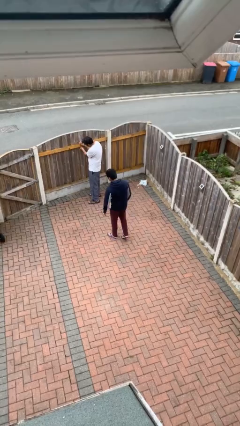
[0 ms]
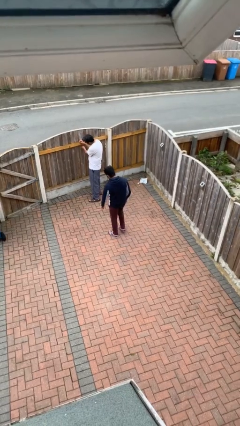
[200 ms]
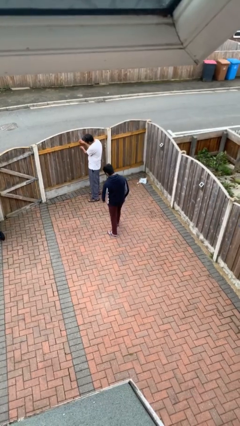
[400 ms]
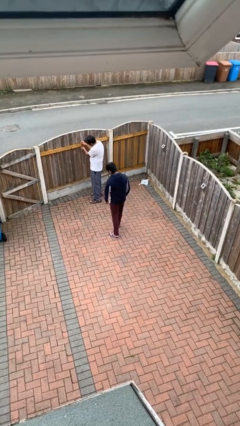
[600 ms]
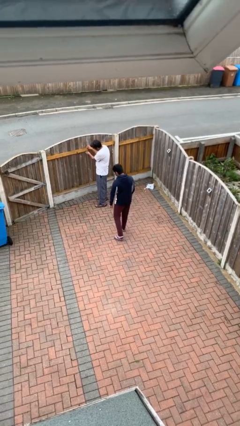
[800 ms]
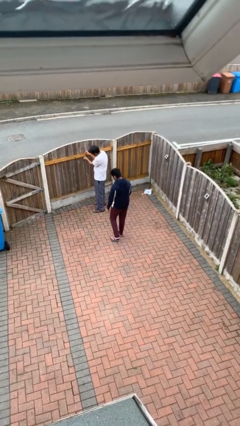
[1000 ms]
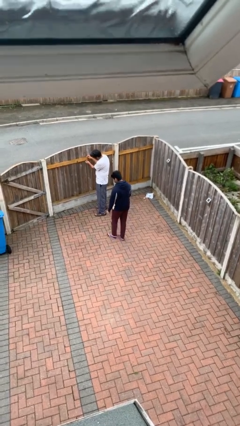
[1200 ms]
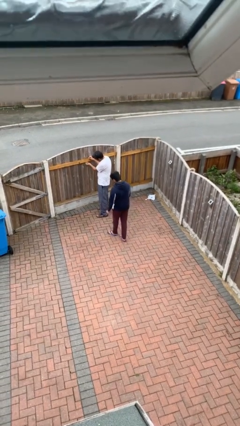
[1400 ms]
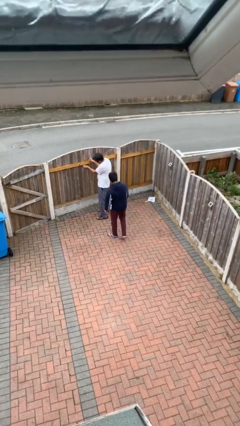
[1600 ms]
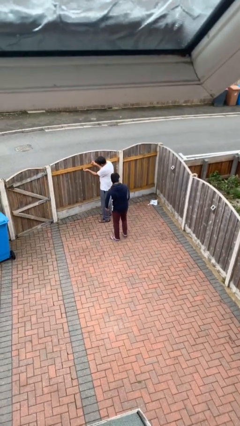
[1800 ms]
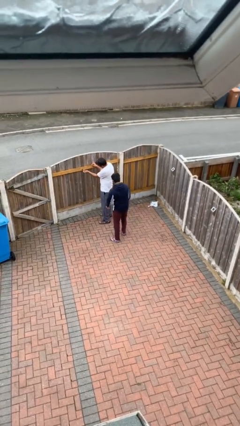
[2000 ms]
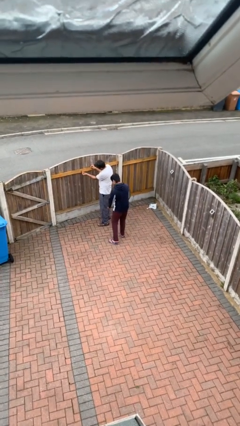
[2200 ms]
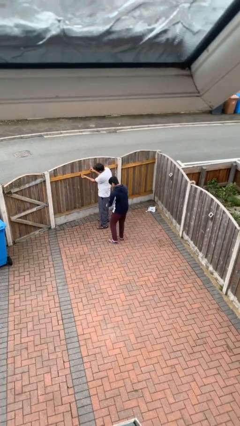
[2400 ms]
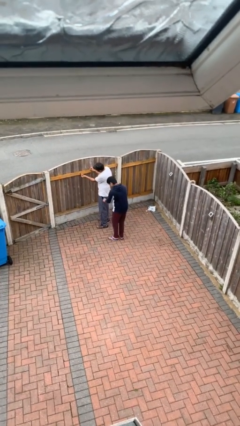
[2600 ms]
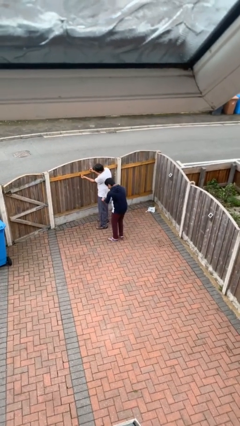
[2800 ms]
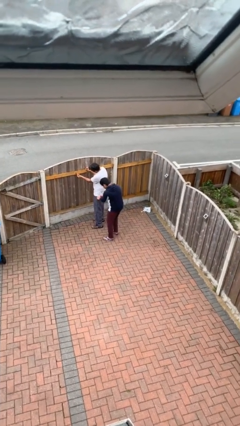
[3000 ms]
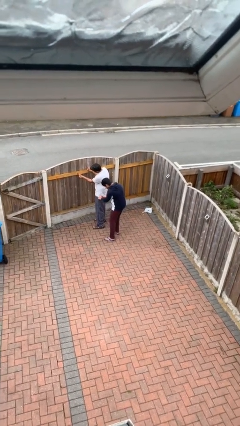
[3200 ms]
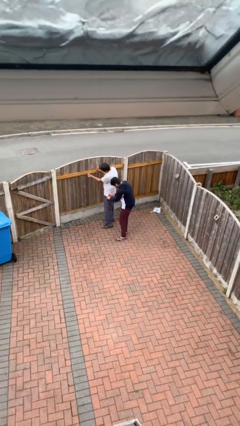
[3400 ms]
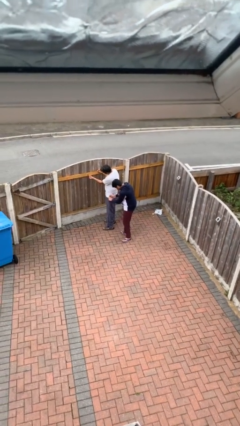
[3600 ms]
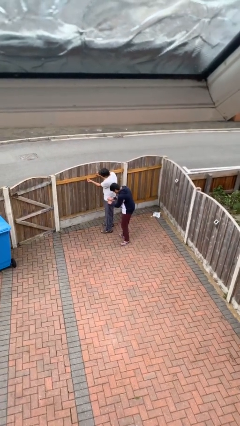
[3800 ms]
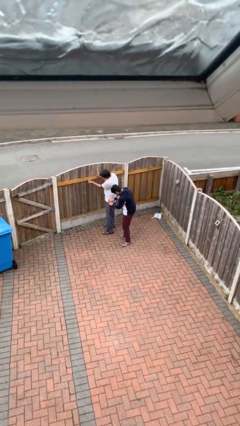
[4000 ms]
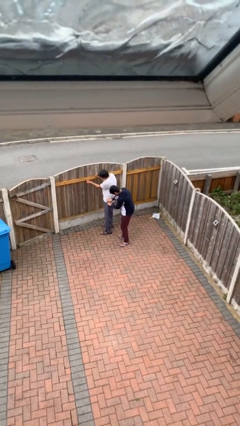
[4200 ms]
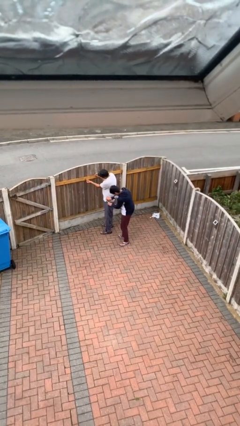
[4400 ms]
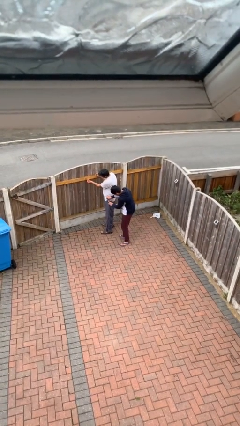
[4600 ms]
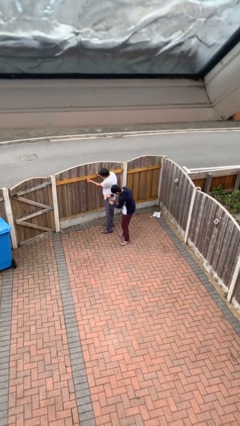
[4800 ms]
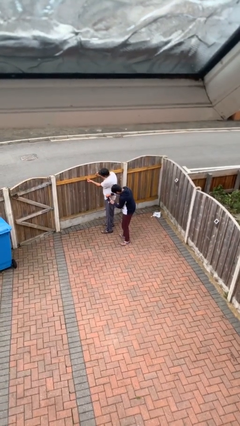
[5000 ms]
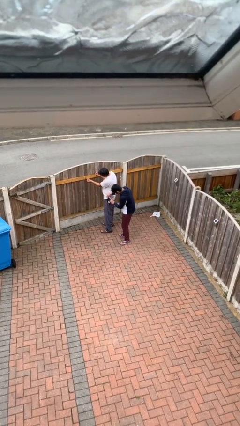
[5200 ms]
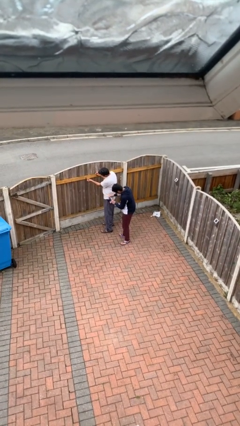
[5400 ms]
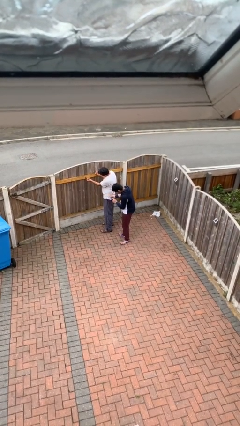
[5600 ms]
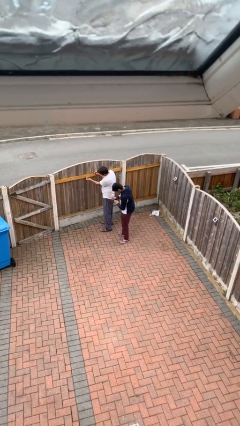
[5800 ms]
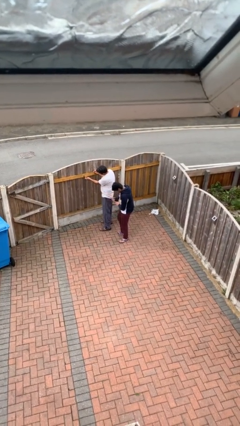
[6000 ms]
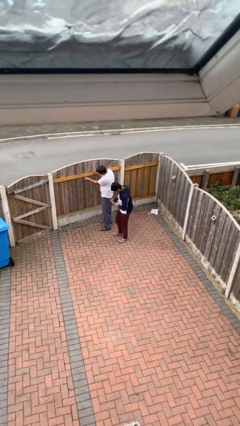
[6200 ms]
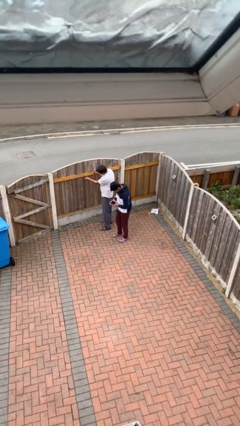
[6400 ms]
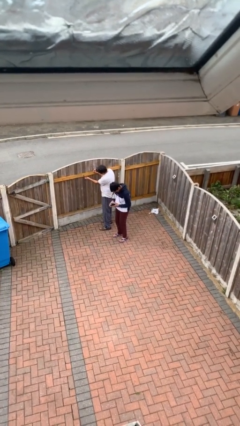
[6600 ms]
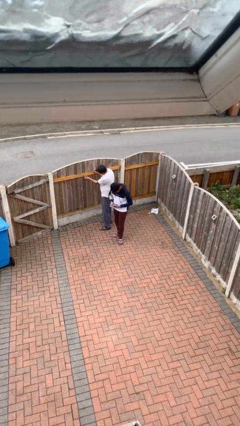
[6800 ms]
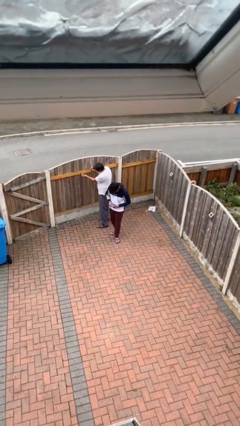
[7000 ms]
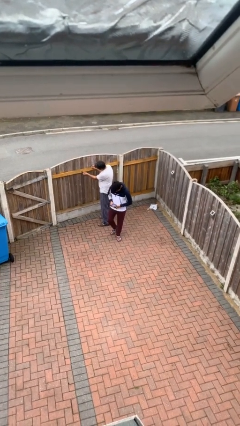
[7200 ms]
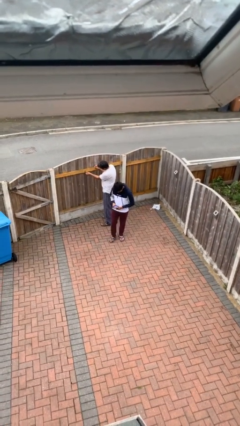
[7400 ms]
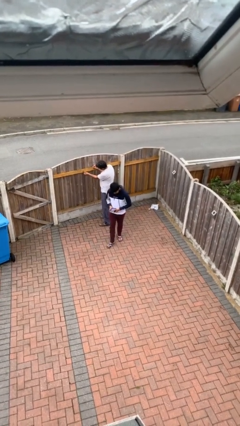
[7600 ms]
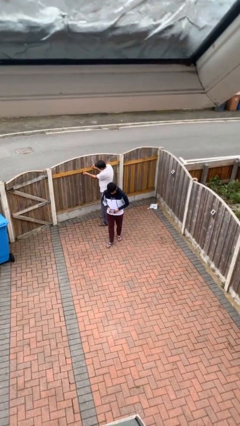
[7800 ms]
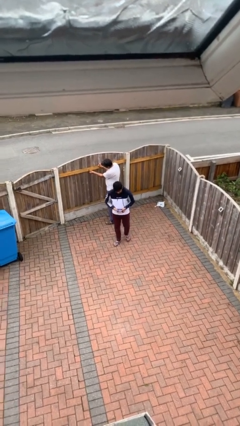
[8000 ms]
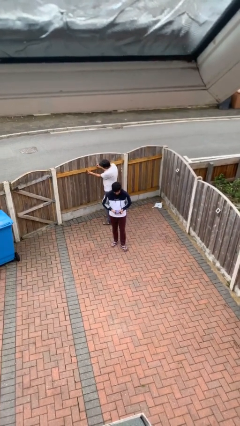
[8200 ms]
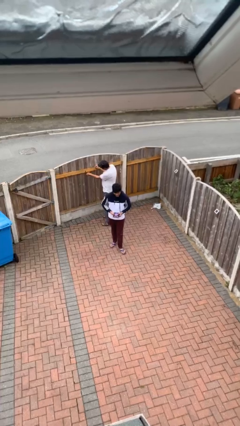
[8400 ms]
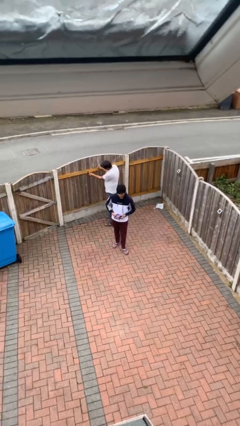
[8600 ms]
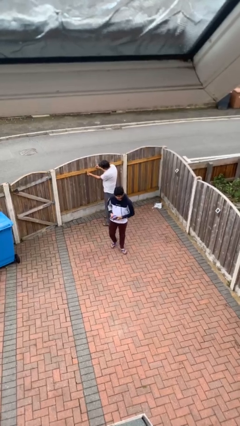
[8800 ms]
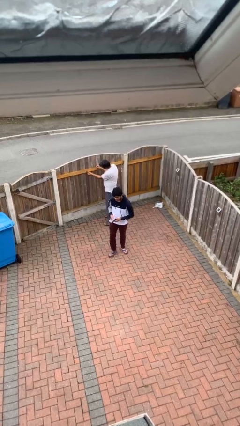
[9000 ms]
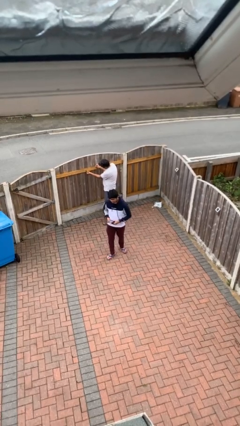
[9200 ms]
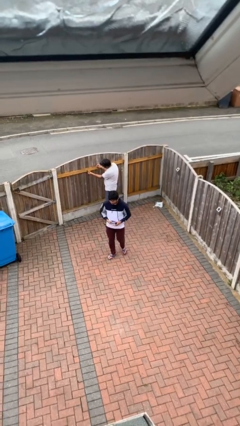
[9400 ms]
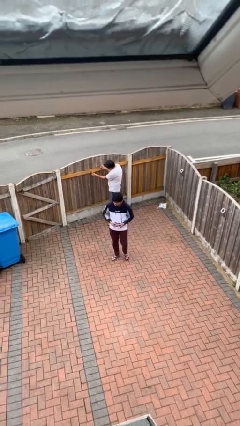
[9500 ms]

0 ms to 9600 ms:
person steals object from person

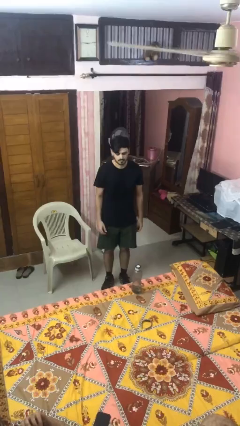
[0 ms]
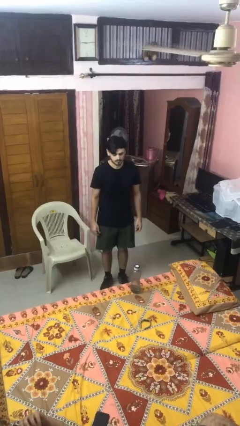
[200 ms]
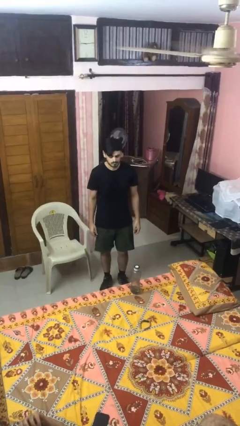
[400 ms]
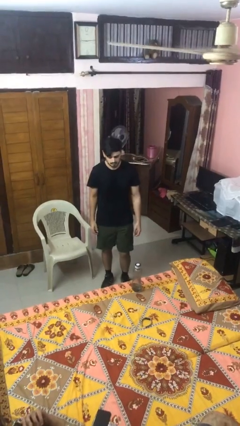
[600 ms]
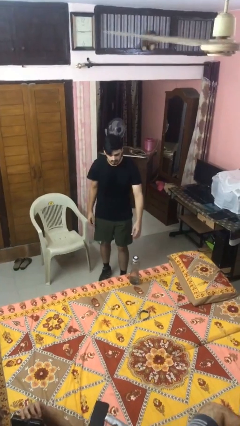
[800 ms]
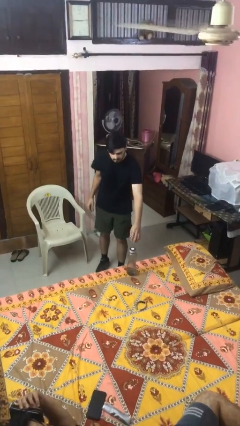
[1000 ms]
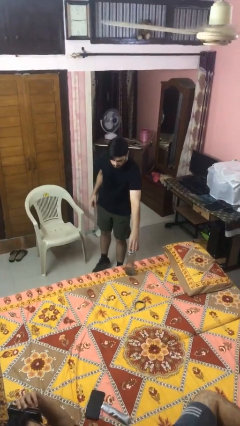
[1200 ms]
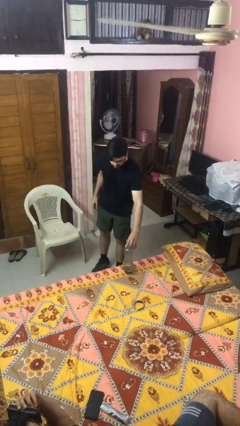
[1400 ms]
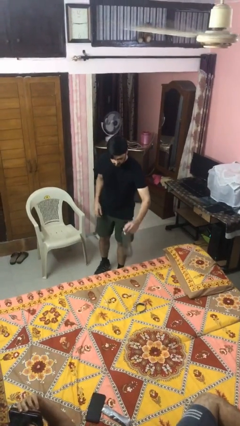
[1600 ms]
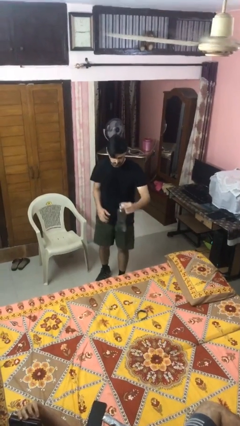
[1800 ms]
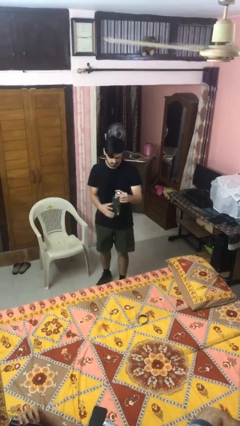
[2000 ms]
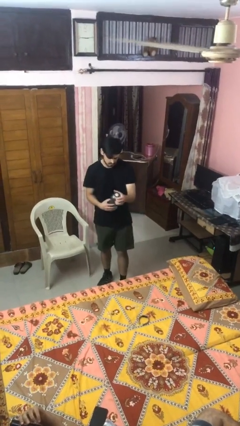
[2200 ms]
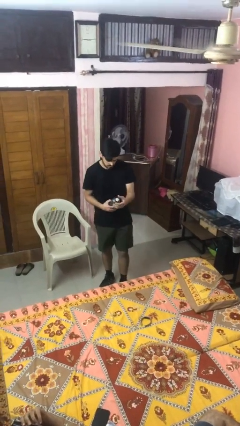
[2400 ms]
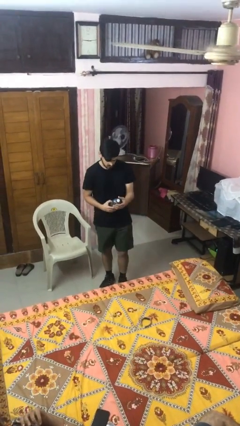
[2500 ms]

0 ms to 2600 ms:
person picks up object from bed

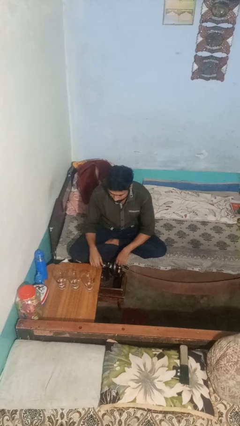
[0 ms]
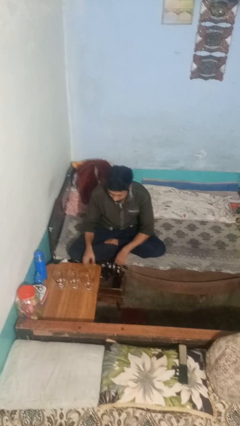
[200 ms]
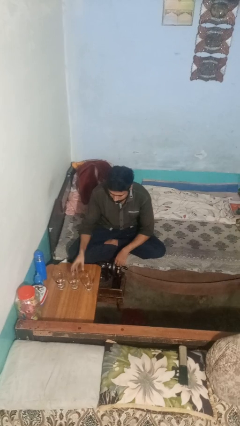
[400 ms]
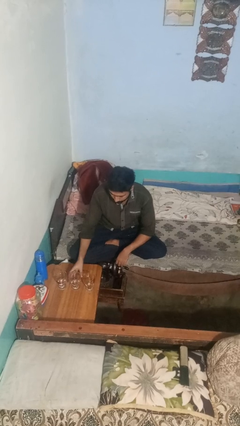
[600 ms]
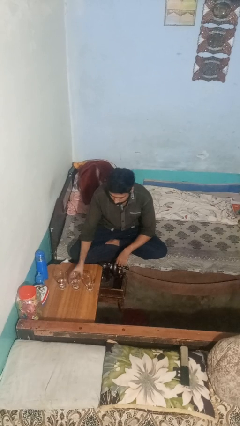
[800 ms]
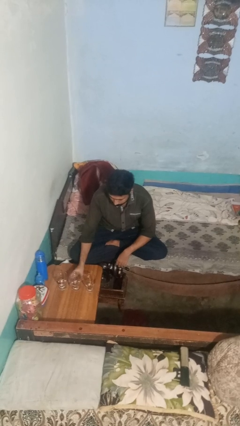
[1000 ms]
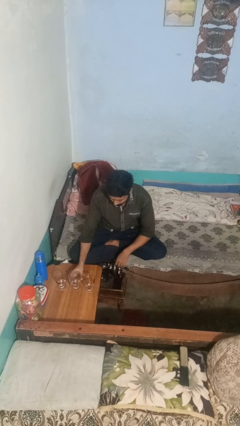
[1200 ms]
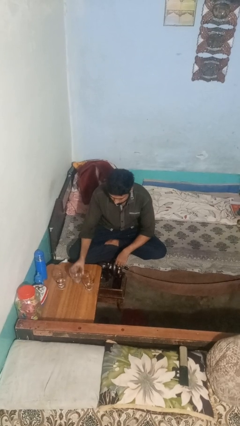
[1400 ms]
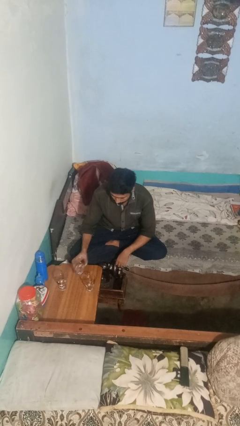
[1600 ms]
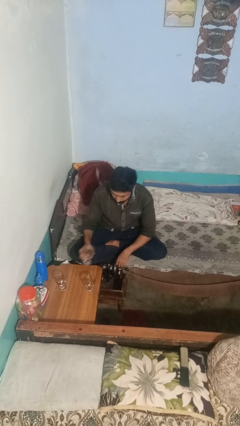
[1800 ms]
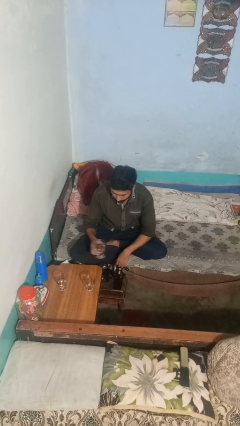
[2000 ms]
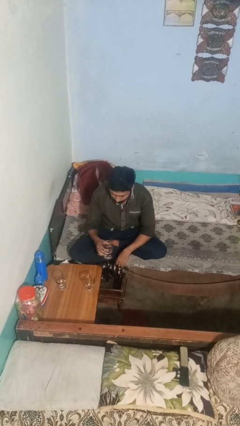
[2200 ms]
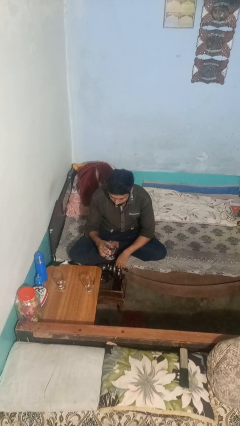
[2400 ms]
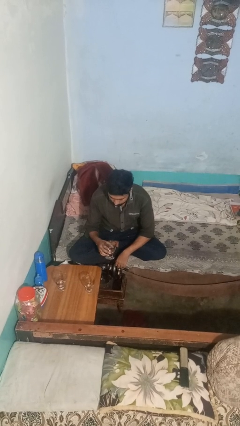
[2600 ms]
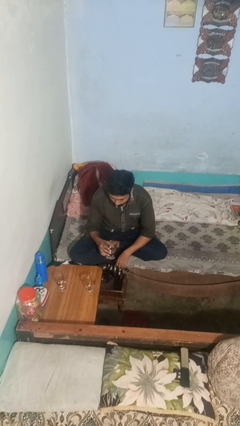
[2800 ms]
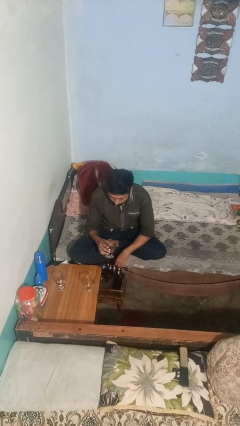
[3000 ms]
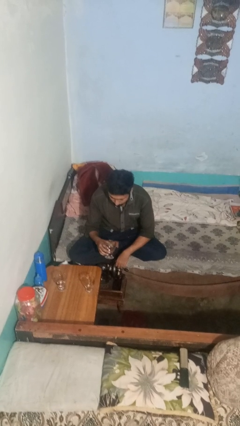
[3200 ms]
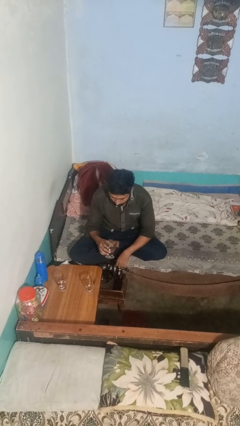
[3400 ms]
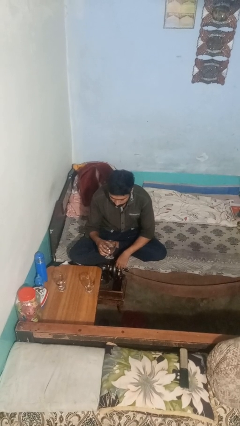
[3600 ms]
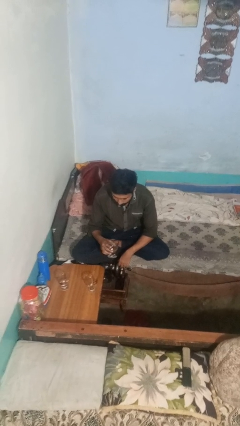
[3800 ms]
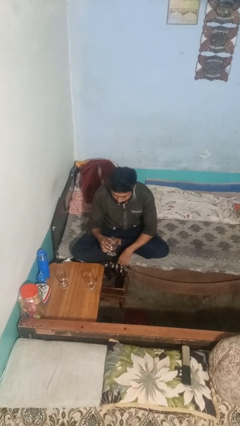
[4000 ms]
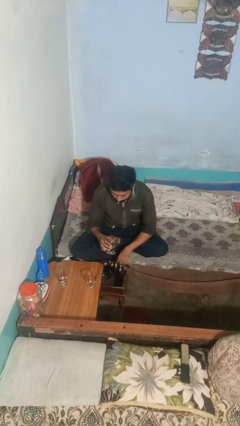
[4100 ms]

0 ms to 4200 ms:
person picks up object from table

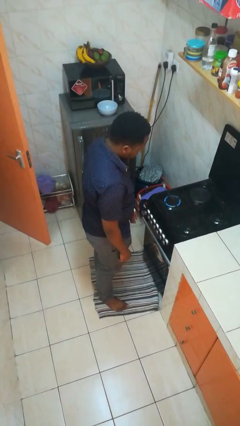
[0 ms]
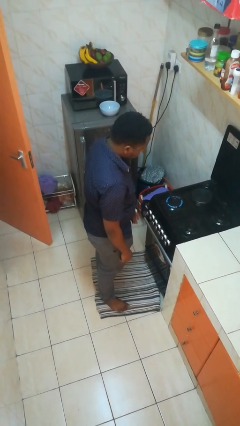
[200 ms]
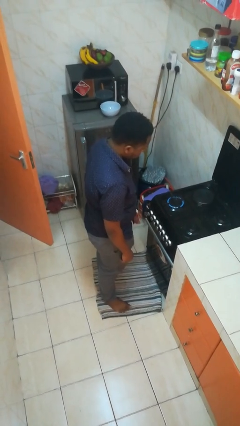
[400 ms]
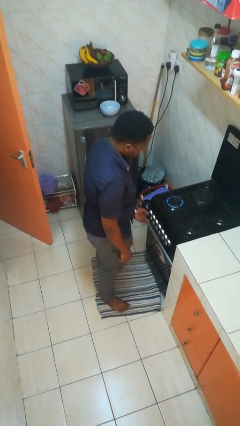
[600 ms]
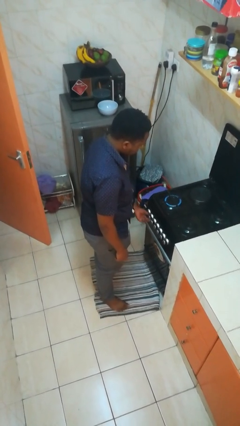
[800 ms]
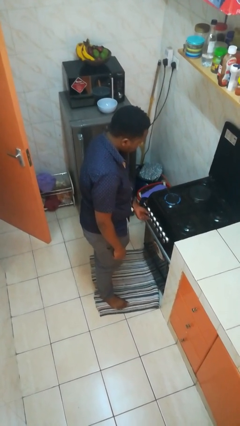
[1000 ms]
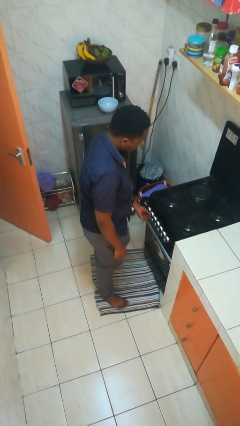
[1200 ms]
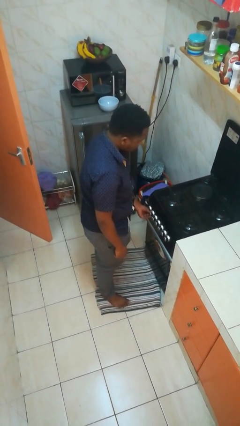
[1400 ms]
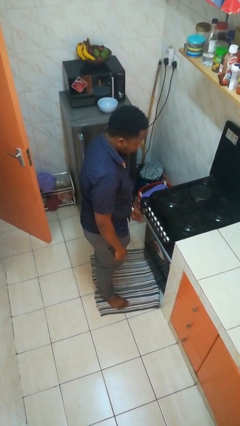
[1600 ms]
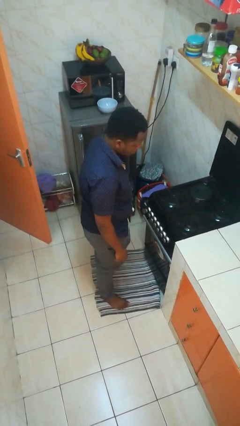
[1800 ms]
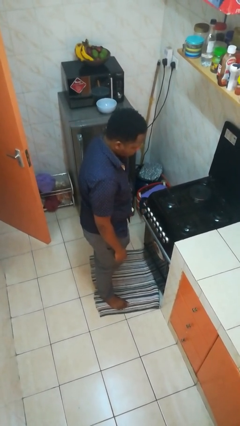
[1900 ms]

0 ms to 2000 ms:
person turns off stovetop
